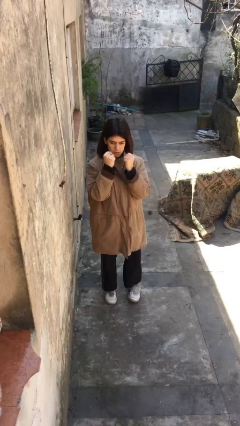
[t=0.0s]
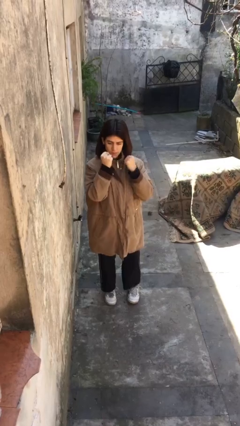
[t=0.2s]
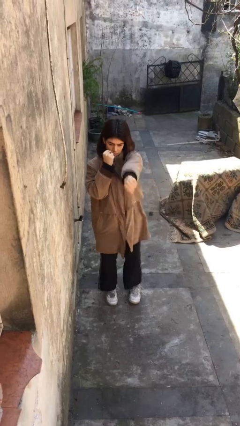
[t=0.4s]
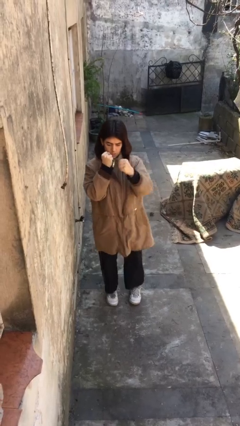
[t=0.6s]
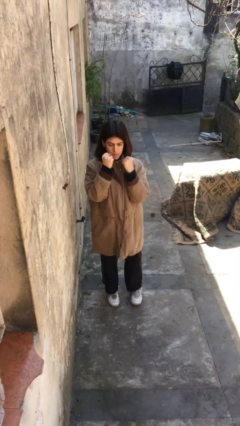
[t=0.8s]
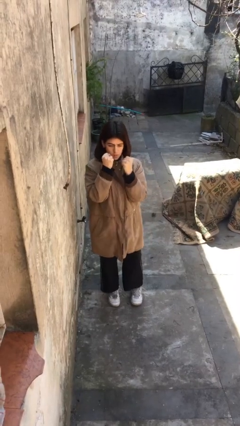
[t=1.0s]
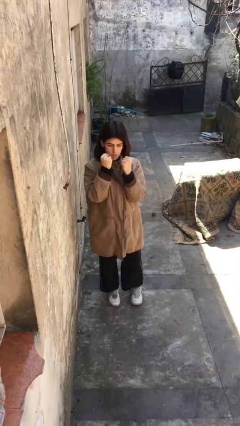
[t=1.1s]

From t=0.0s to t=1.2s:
person punches

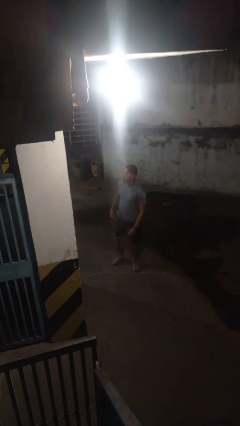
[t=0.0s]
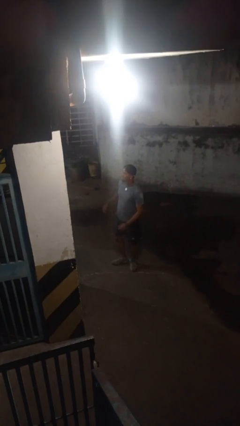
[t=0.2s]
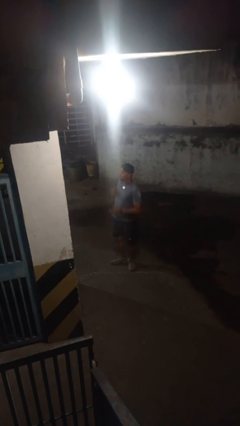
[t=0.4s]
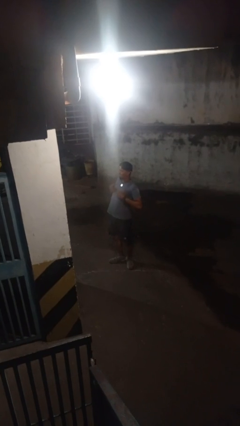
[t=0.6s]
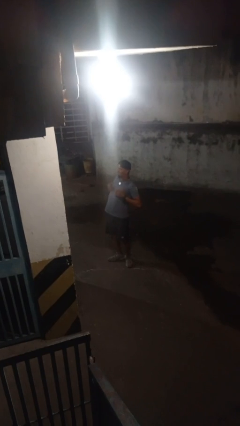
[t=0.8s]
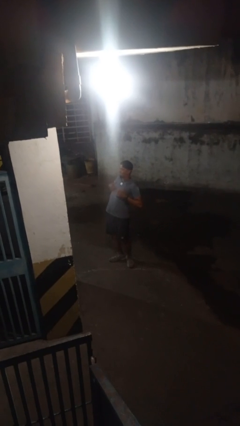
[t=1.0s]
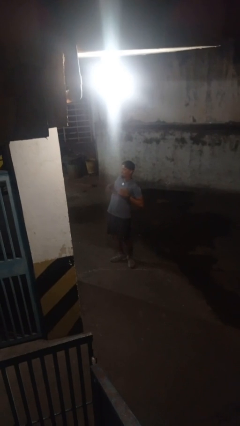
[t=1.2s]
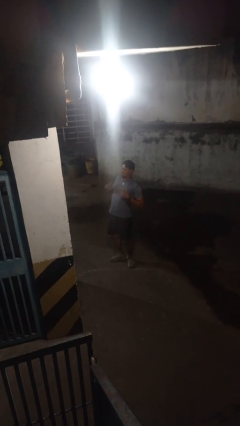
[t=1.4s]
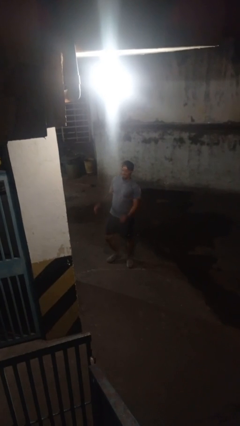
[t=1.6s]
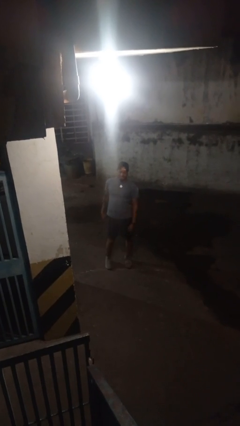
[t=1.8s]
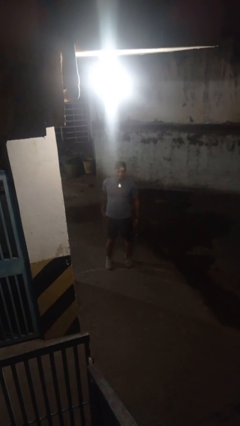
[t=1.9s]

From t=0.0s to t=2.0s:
person drums on chest

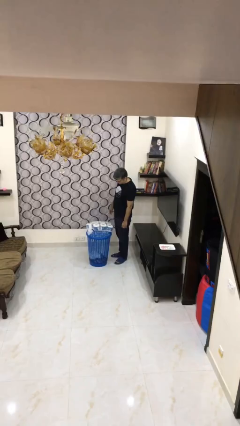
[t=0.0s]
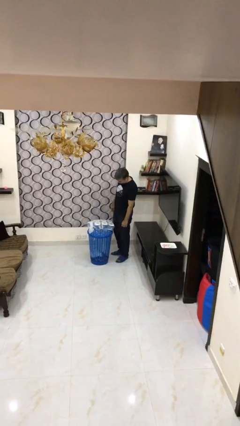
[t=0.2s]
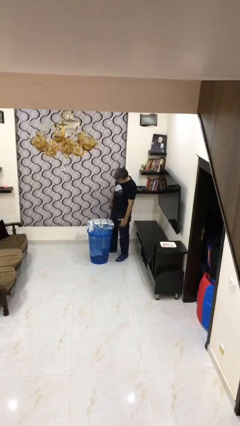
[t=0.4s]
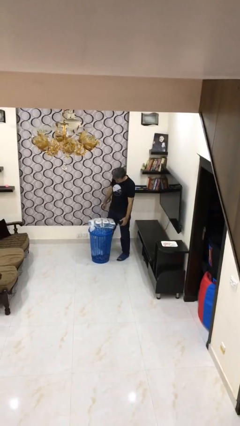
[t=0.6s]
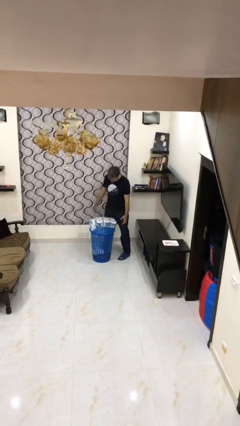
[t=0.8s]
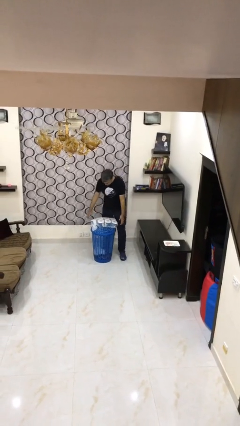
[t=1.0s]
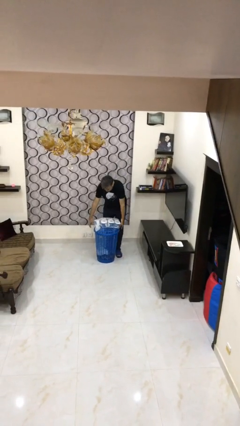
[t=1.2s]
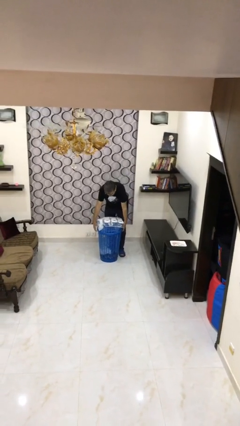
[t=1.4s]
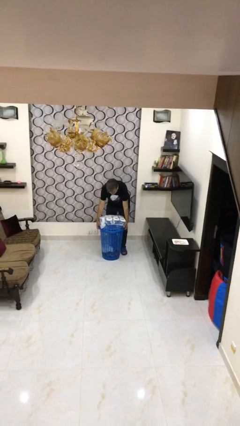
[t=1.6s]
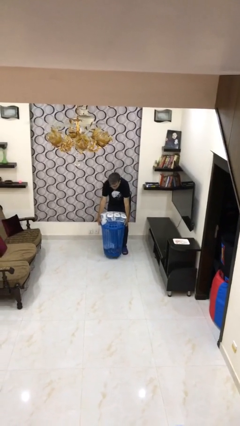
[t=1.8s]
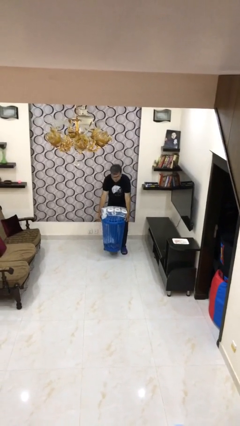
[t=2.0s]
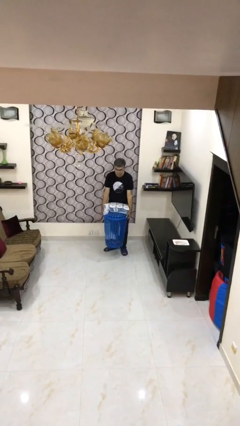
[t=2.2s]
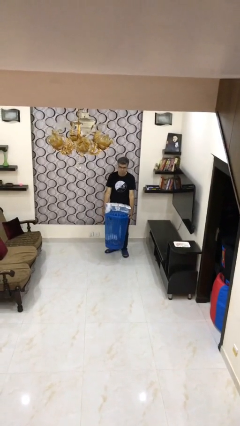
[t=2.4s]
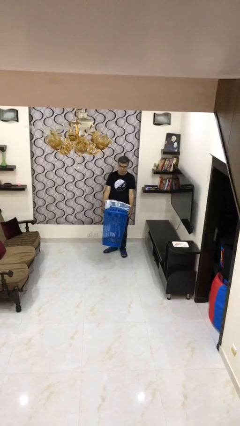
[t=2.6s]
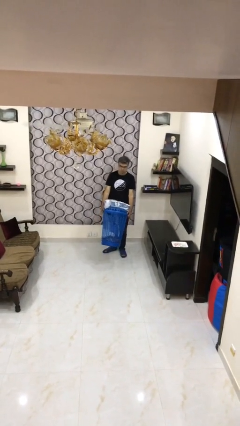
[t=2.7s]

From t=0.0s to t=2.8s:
person picks up object from floor

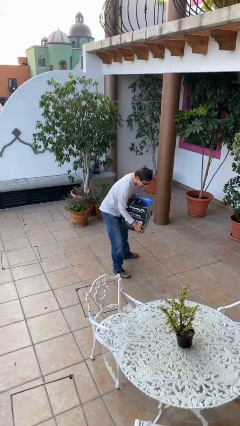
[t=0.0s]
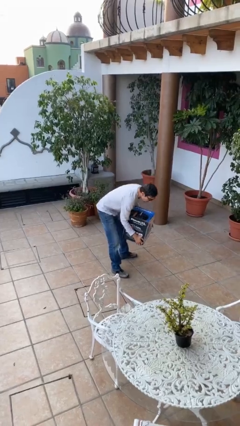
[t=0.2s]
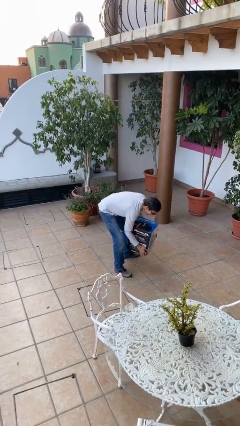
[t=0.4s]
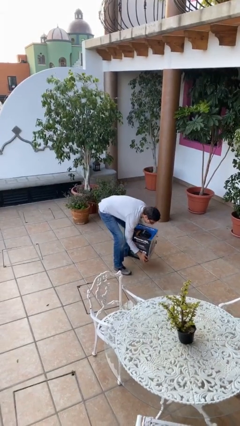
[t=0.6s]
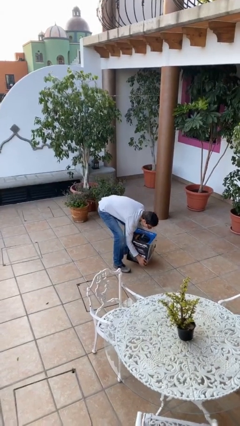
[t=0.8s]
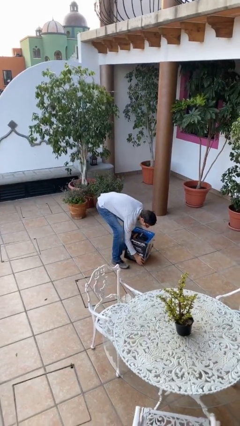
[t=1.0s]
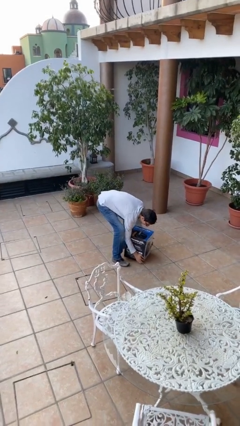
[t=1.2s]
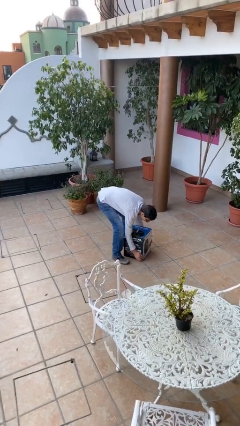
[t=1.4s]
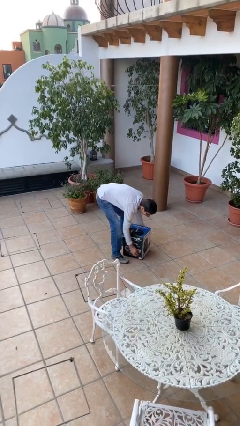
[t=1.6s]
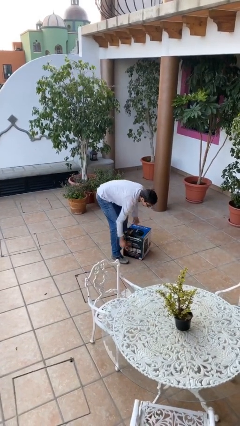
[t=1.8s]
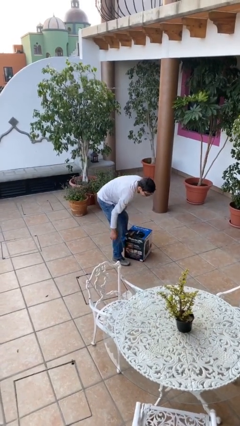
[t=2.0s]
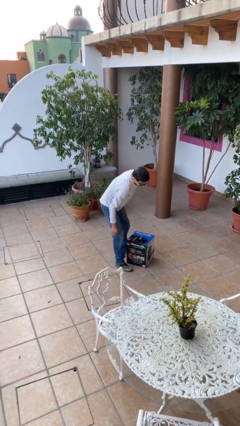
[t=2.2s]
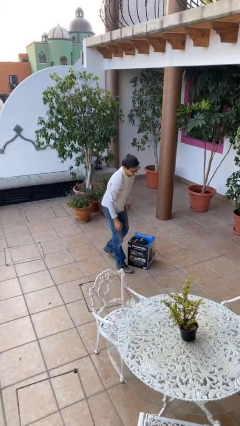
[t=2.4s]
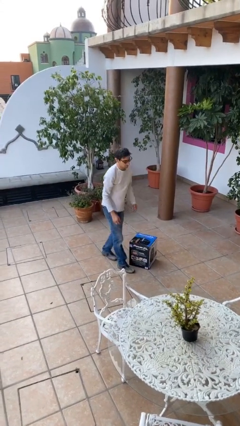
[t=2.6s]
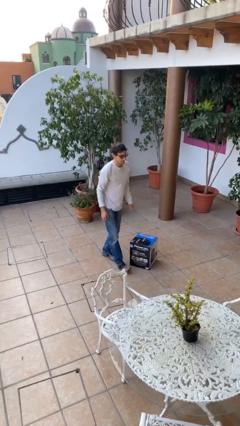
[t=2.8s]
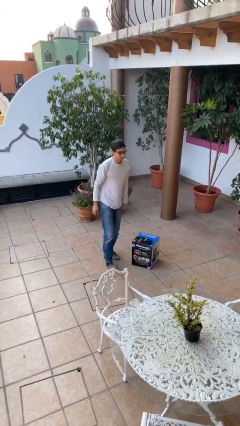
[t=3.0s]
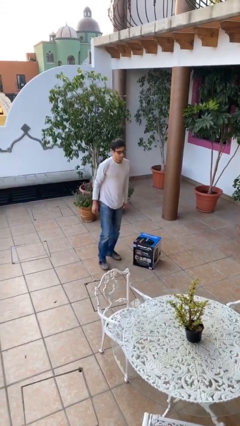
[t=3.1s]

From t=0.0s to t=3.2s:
person puts down object on floor

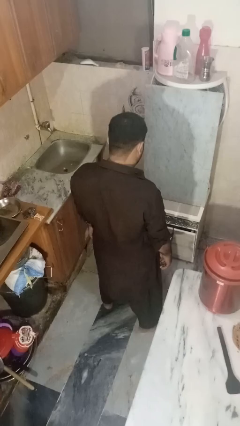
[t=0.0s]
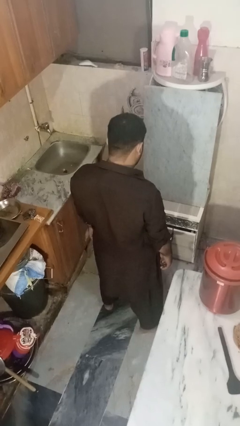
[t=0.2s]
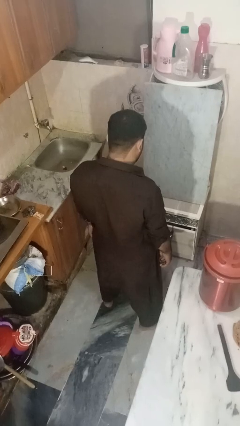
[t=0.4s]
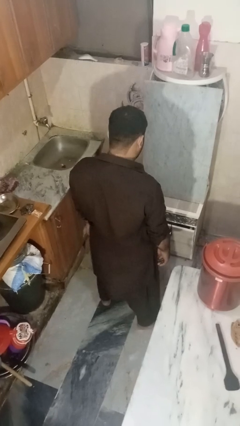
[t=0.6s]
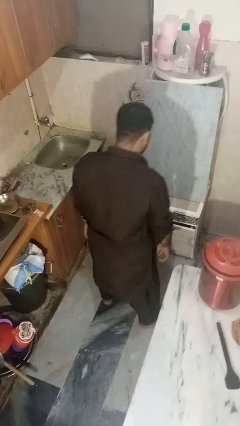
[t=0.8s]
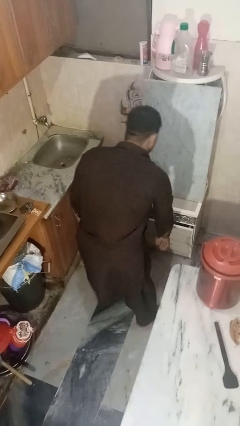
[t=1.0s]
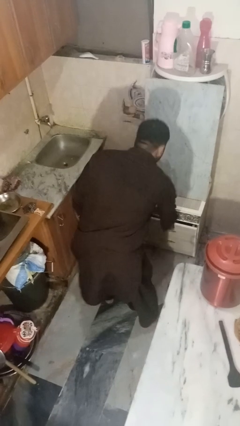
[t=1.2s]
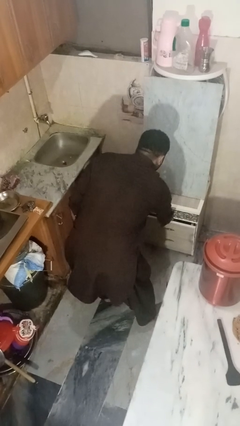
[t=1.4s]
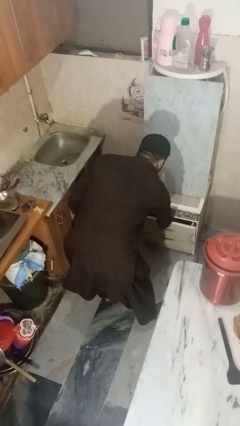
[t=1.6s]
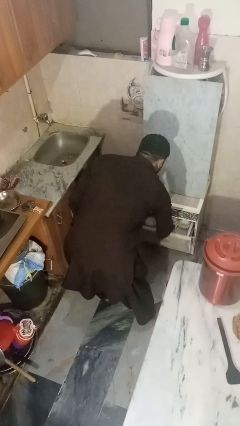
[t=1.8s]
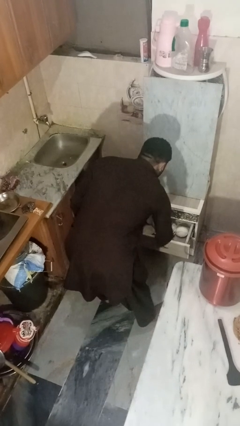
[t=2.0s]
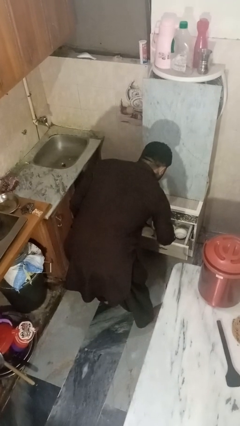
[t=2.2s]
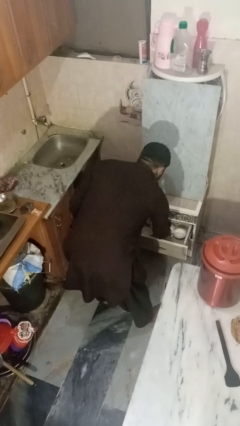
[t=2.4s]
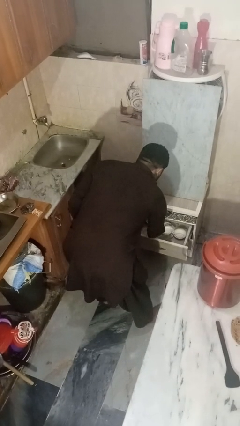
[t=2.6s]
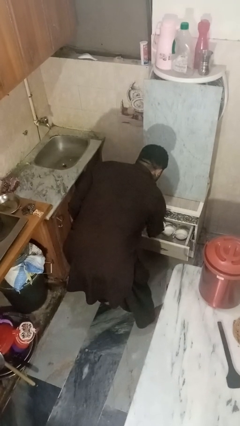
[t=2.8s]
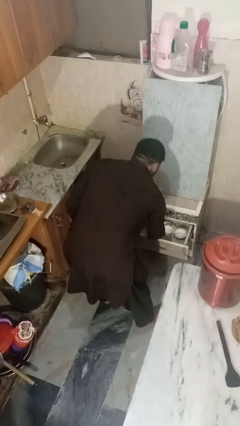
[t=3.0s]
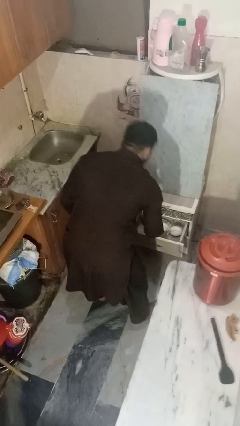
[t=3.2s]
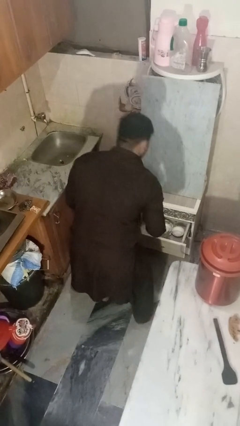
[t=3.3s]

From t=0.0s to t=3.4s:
person takes object from kitchen drawer

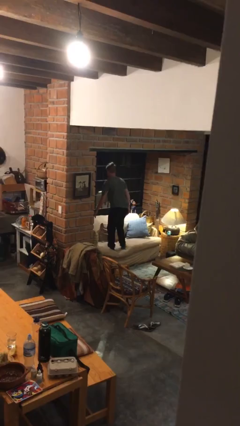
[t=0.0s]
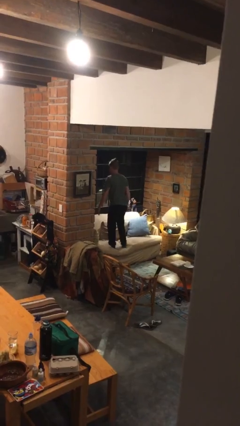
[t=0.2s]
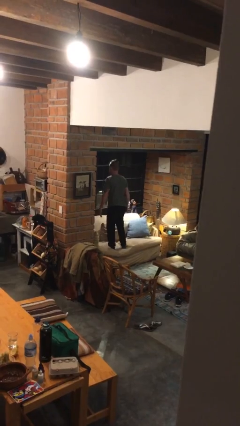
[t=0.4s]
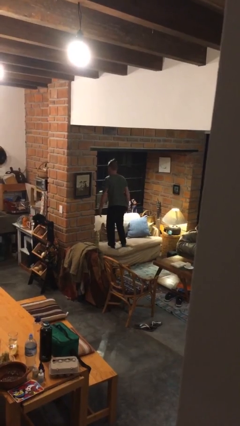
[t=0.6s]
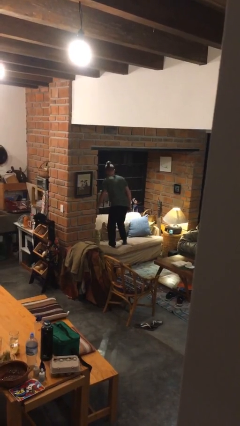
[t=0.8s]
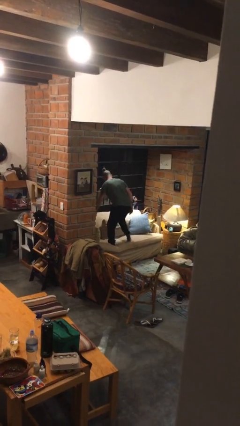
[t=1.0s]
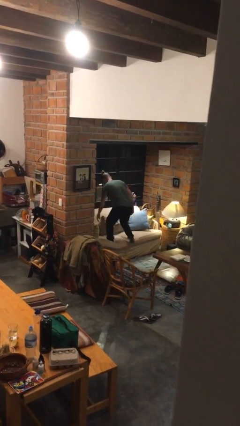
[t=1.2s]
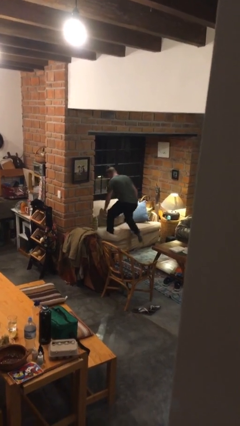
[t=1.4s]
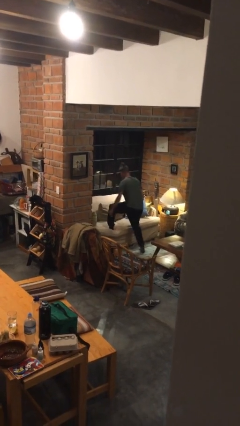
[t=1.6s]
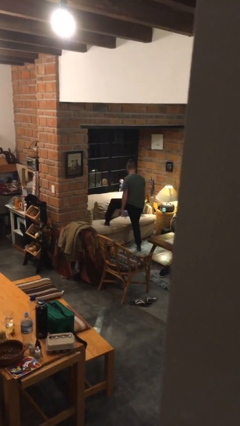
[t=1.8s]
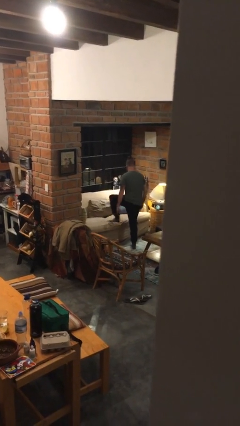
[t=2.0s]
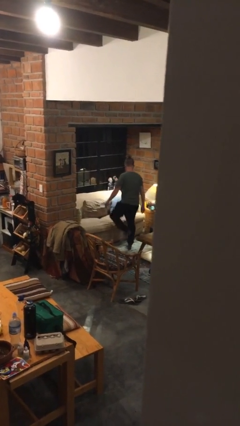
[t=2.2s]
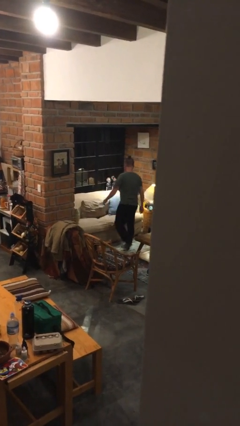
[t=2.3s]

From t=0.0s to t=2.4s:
person climbs off couch

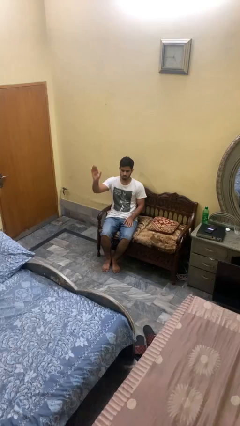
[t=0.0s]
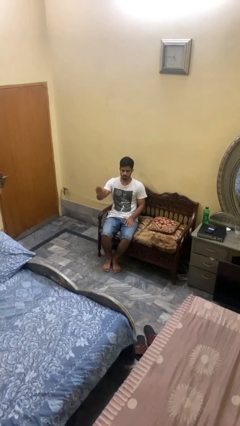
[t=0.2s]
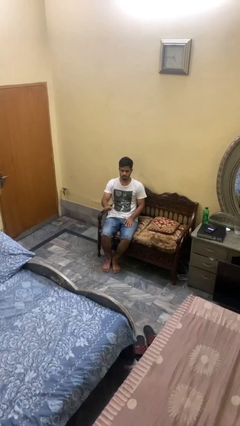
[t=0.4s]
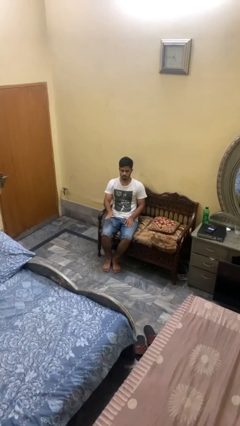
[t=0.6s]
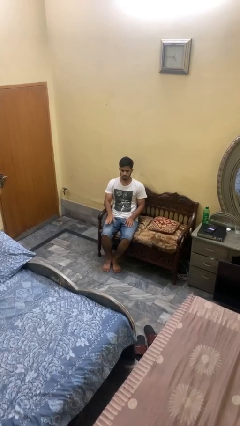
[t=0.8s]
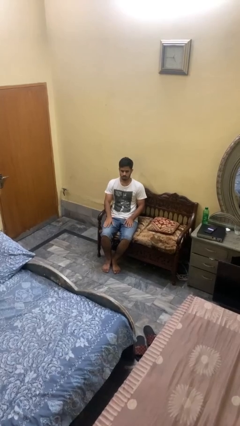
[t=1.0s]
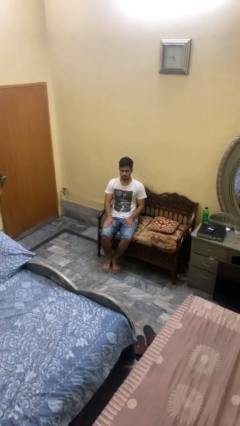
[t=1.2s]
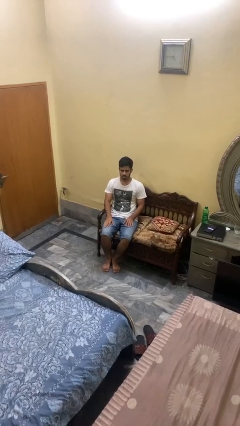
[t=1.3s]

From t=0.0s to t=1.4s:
person gestures lower hand

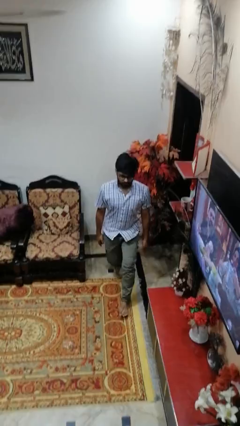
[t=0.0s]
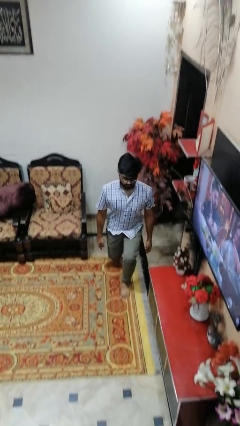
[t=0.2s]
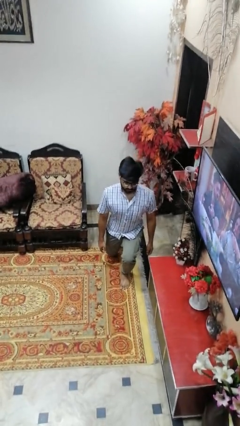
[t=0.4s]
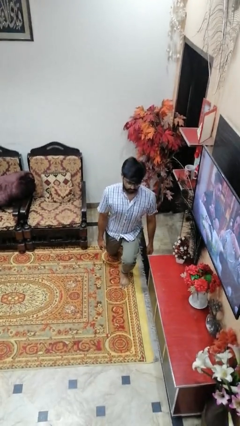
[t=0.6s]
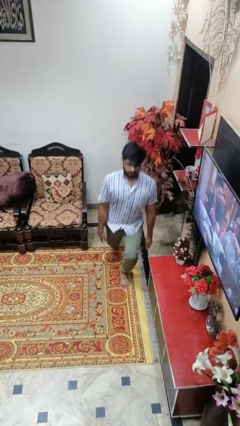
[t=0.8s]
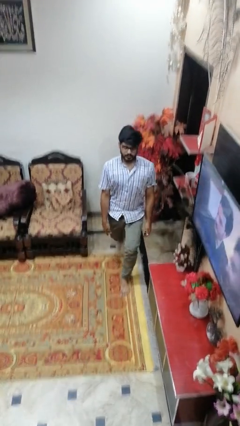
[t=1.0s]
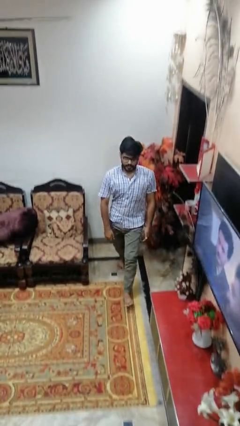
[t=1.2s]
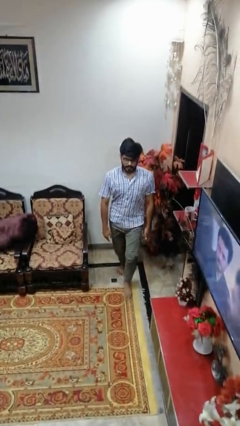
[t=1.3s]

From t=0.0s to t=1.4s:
person exercises with lunges
